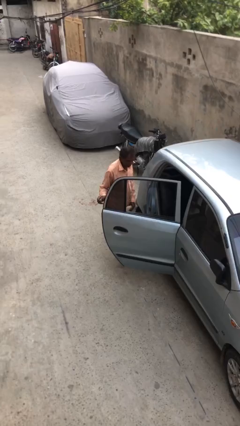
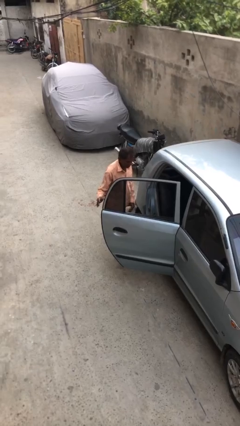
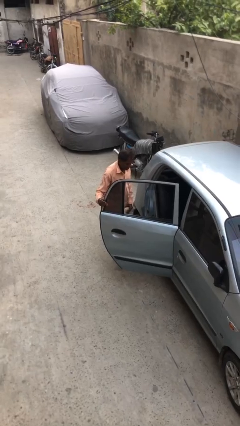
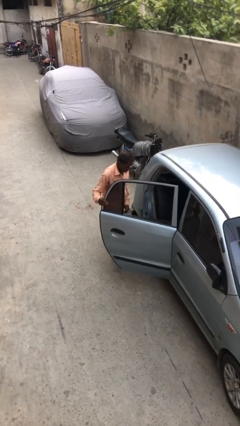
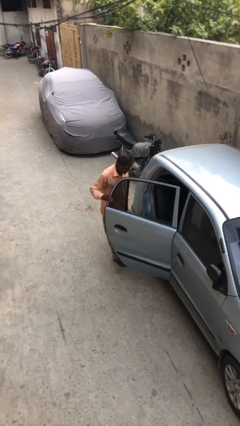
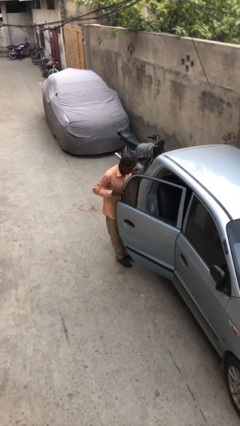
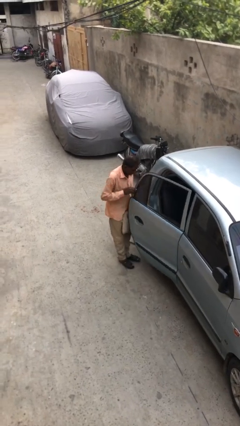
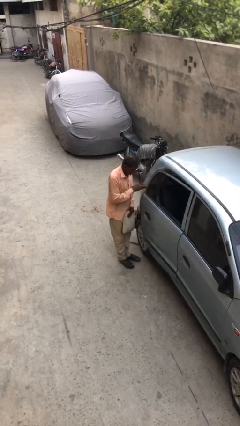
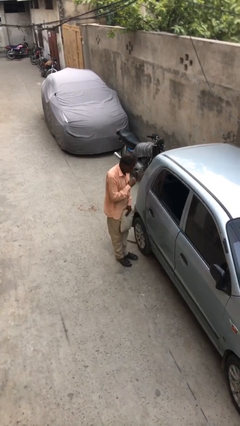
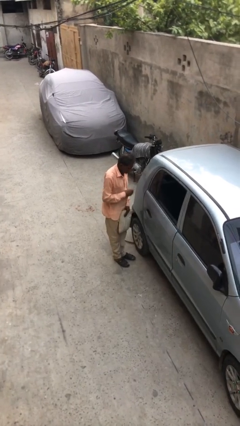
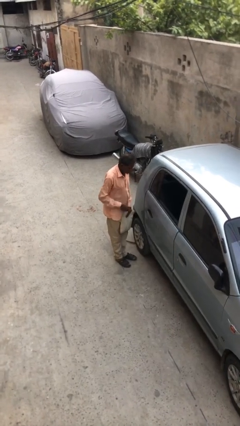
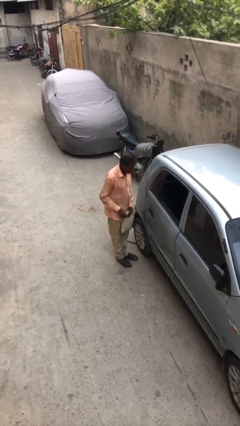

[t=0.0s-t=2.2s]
person closes car door

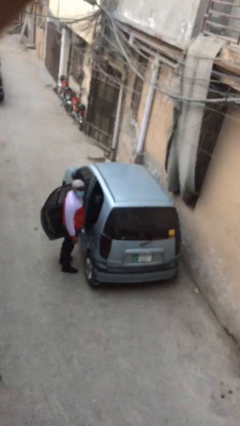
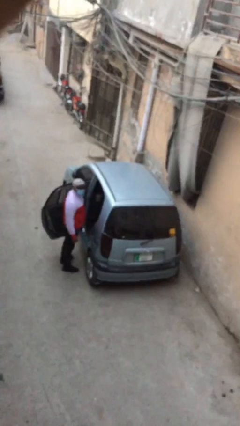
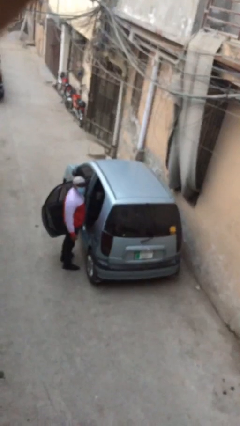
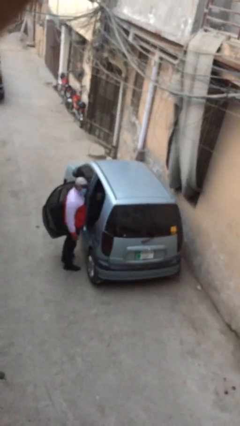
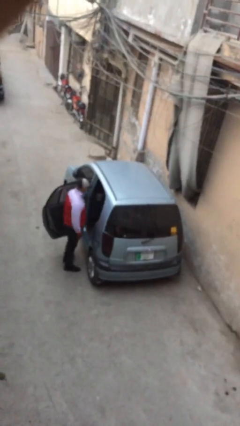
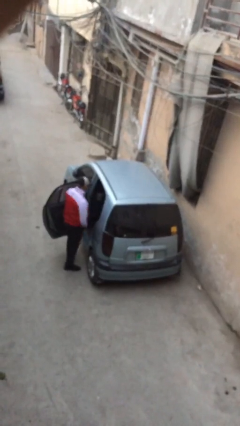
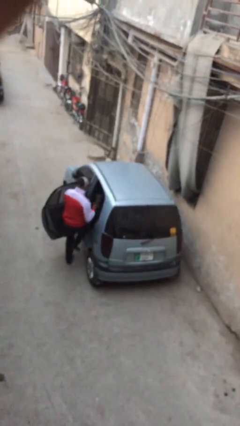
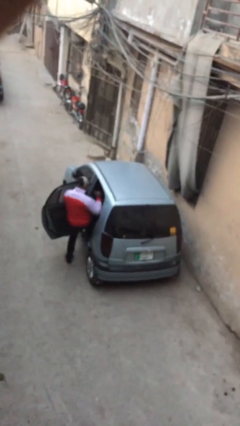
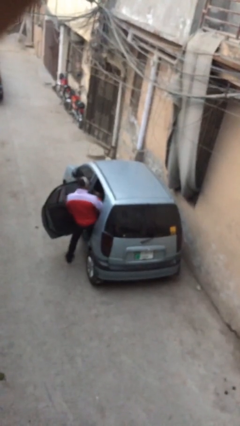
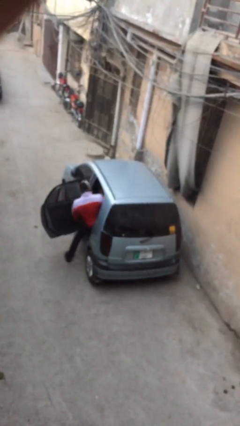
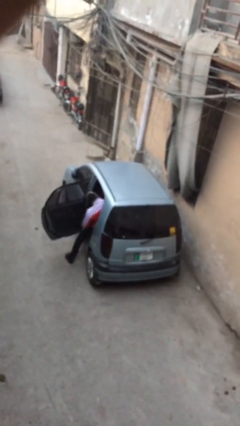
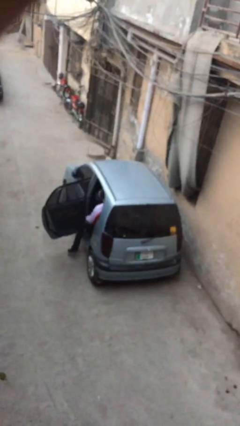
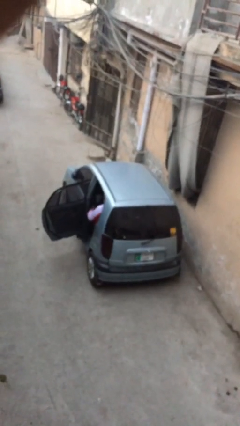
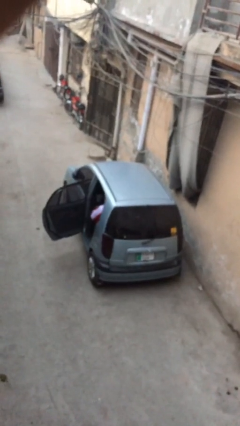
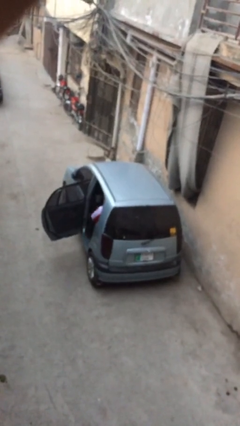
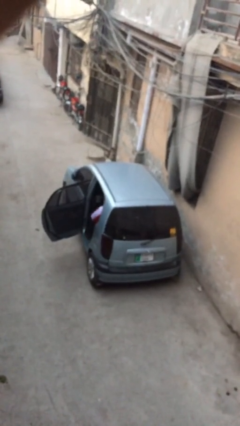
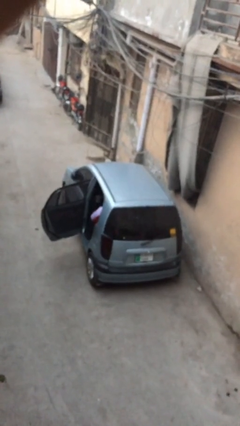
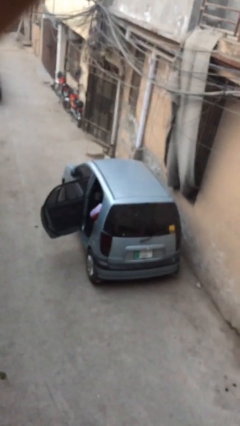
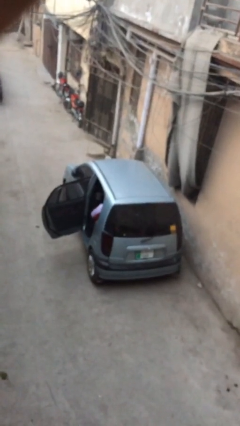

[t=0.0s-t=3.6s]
person enters car

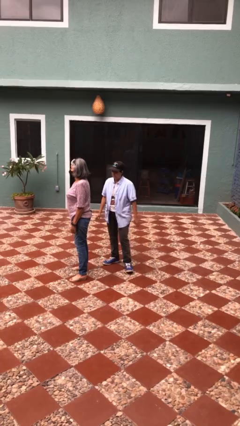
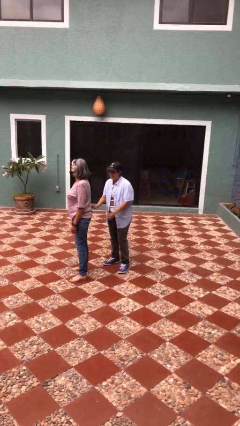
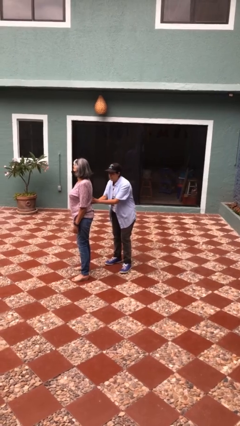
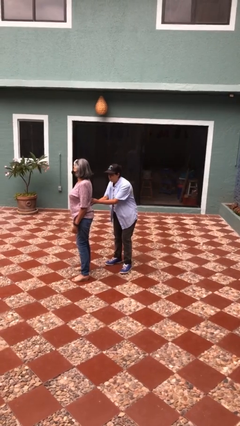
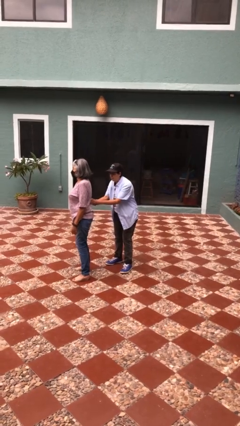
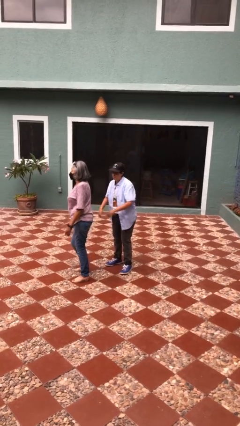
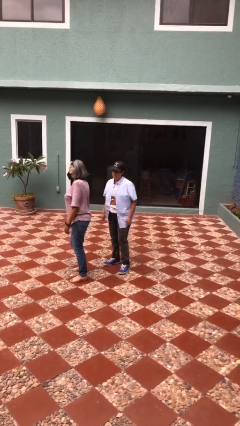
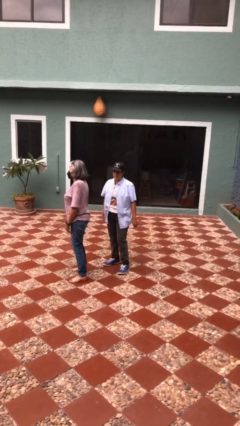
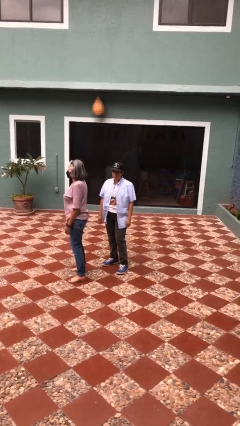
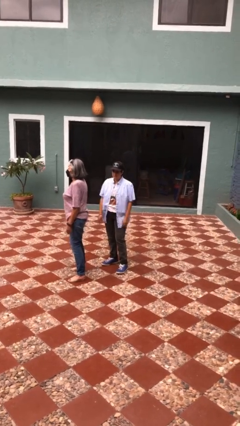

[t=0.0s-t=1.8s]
person tickles person

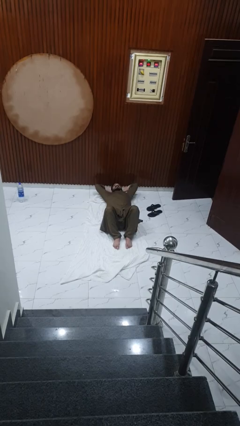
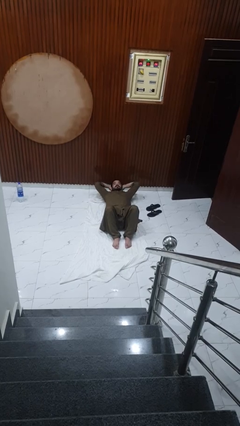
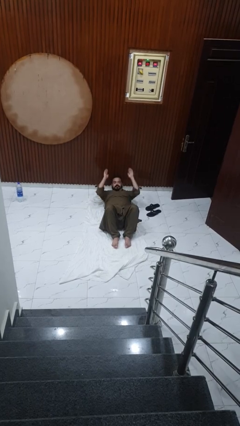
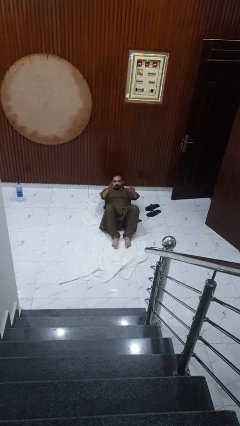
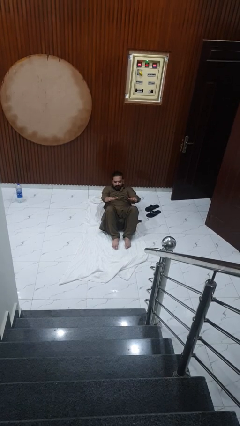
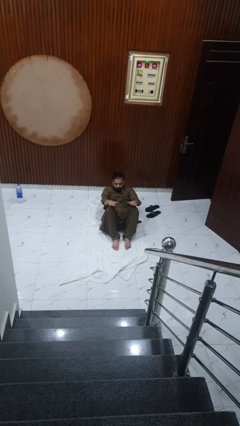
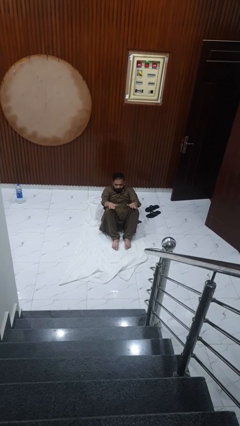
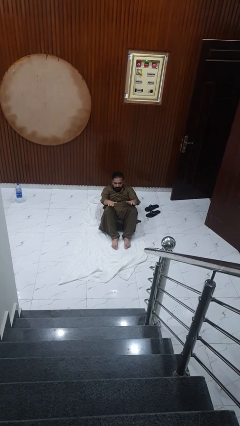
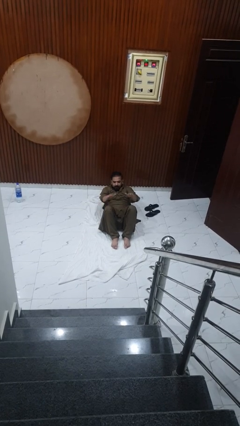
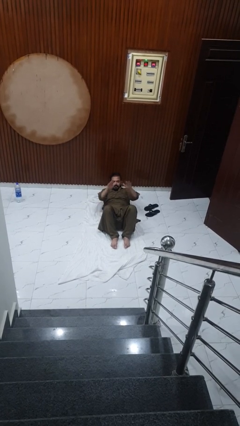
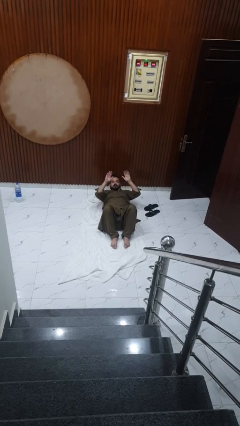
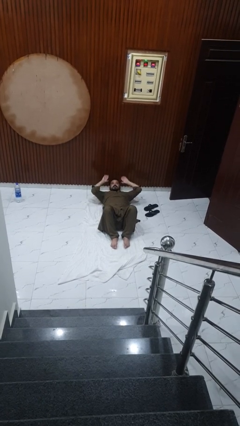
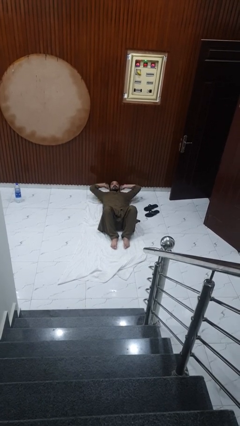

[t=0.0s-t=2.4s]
person exercises with situp

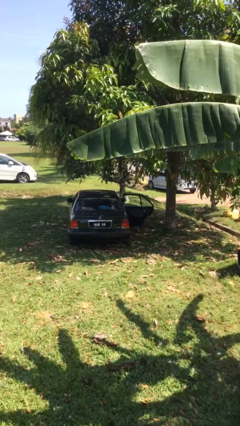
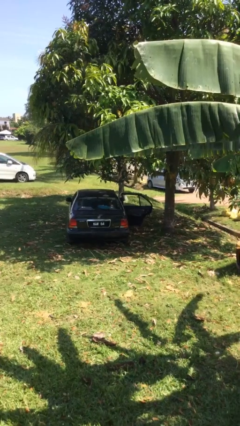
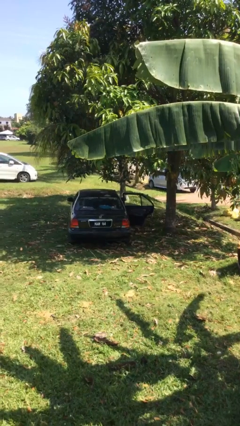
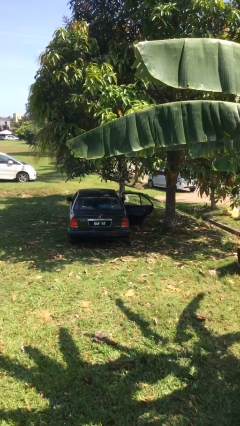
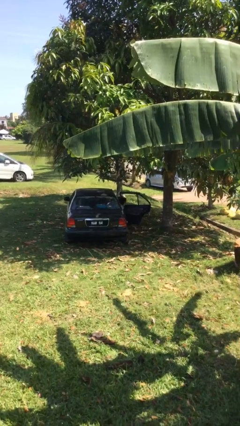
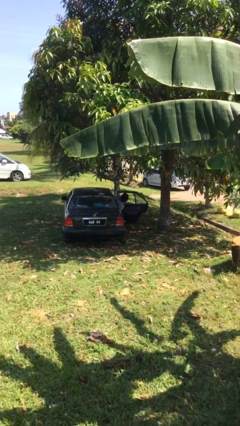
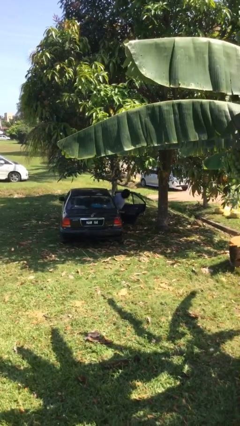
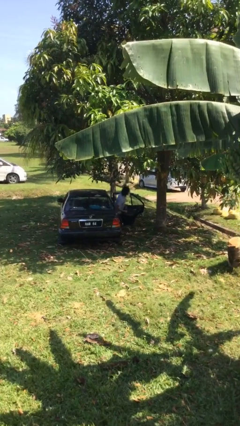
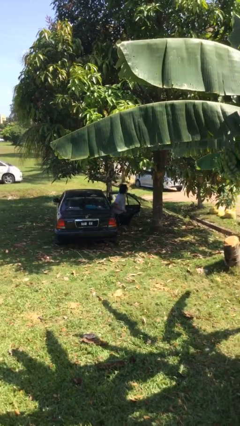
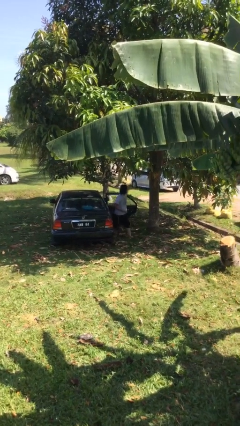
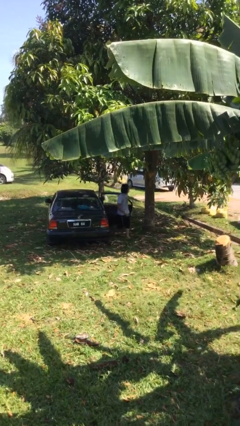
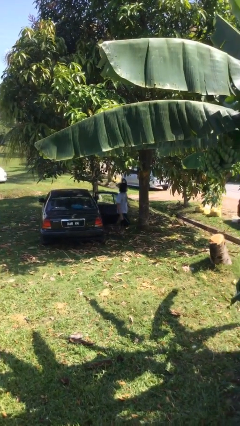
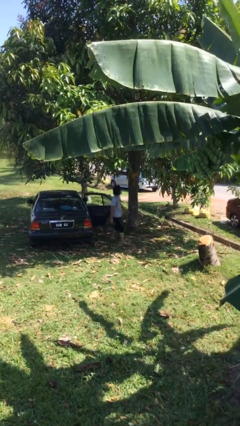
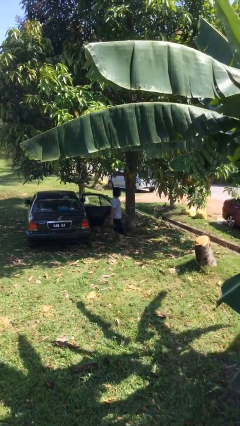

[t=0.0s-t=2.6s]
person exits car

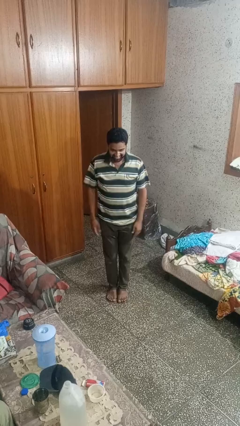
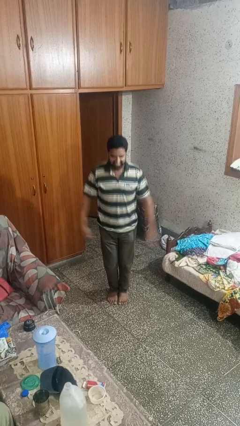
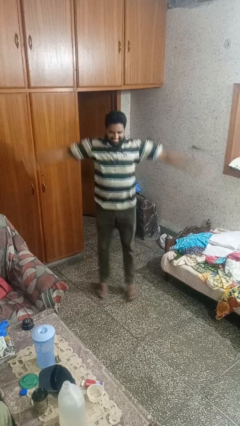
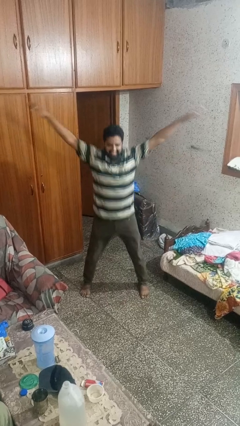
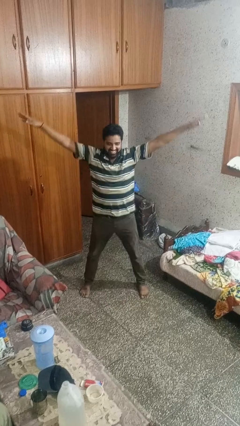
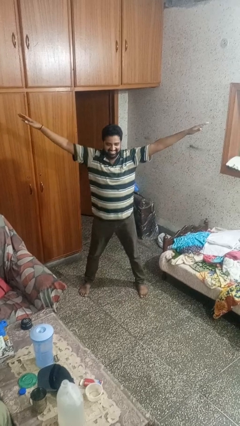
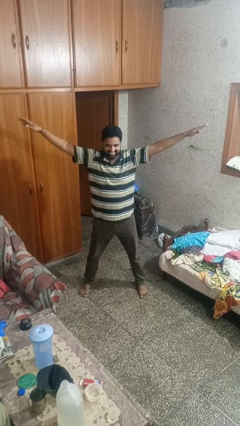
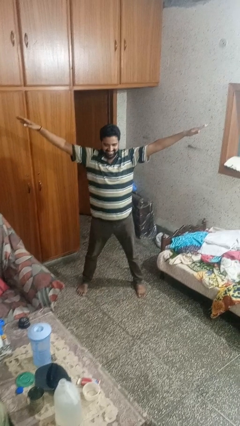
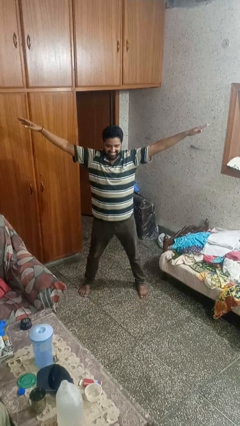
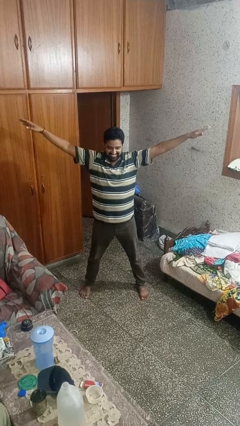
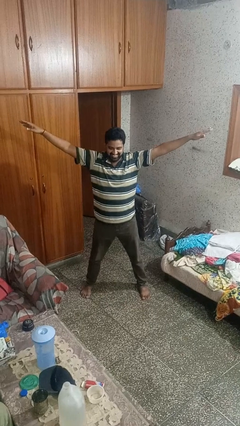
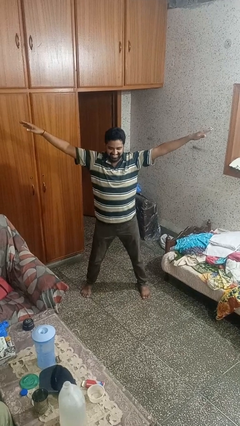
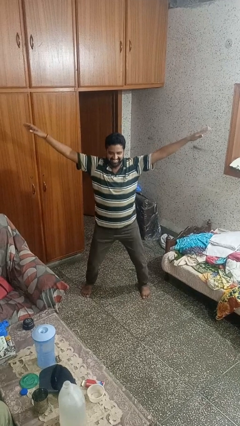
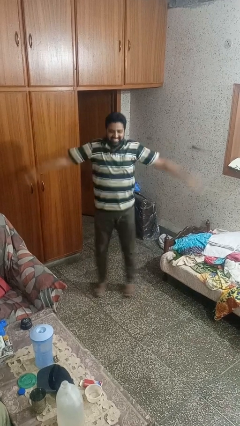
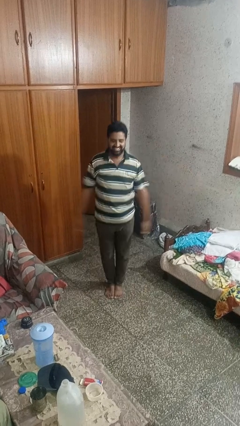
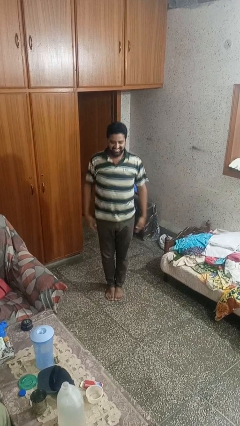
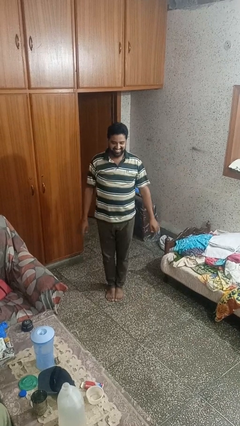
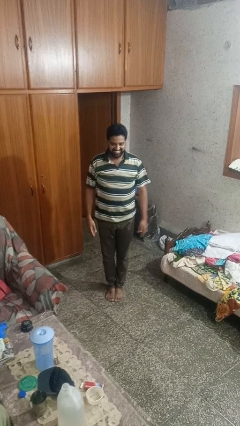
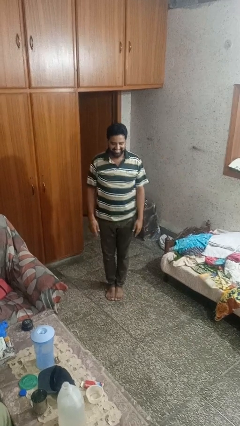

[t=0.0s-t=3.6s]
person exercises with jumping jacks

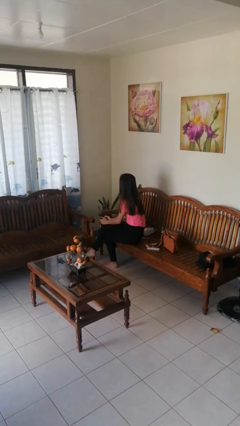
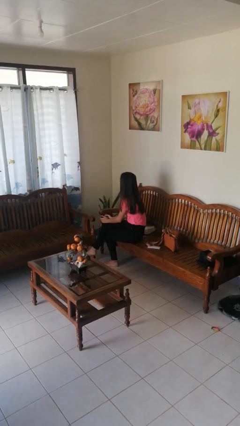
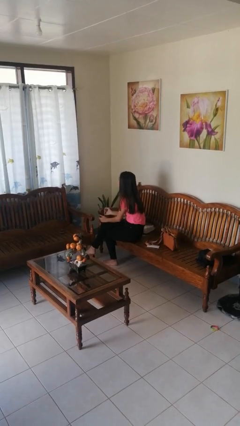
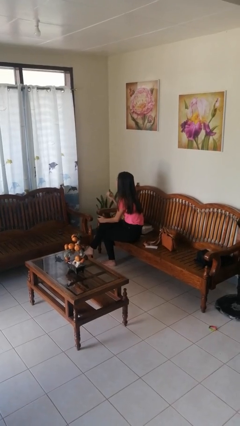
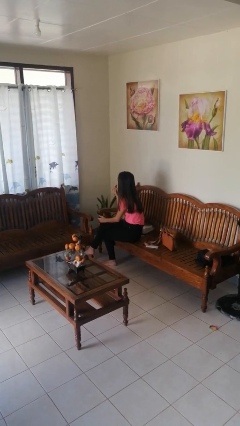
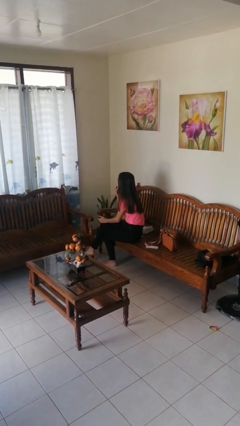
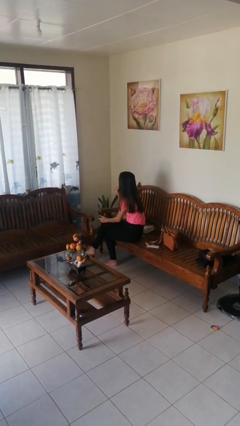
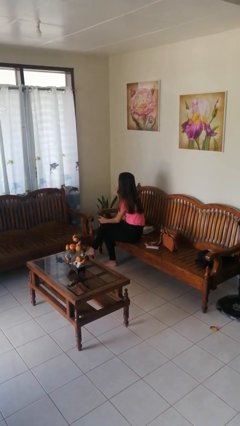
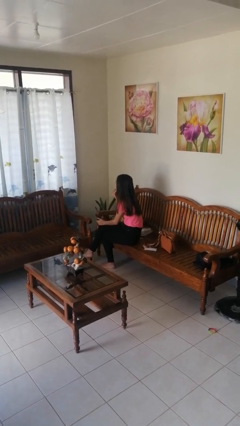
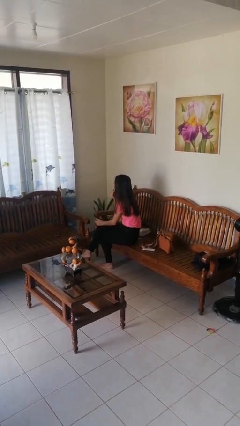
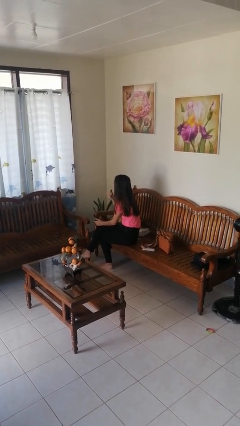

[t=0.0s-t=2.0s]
person applies lip makeup
